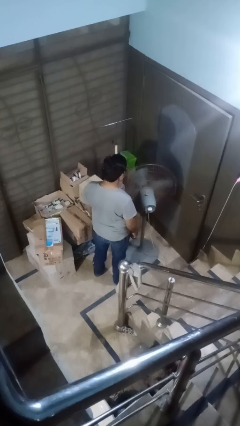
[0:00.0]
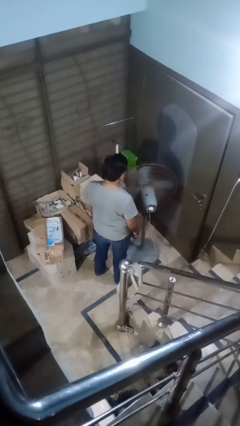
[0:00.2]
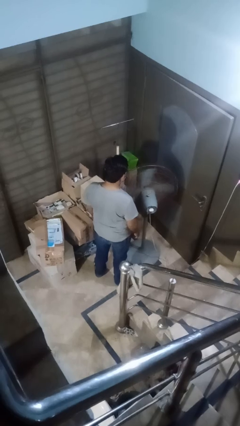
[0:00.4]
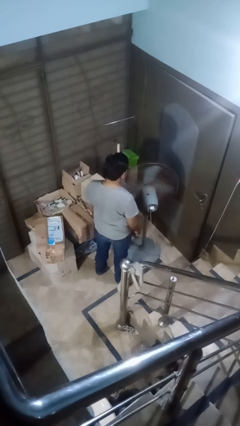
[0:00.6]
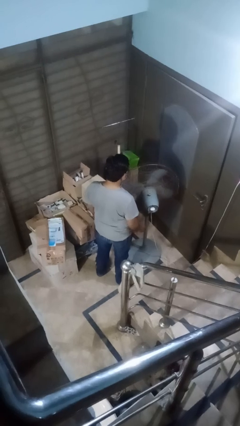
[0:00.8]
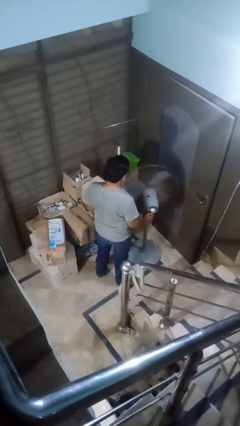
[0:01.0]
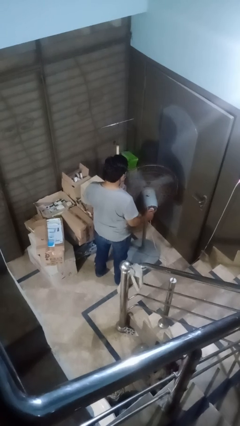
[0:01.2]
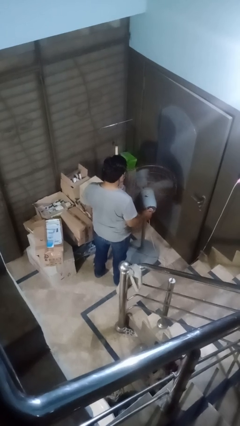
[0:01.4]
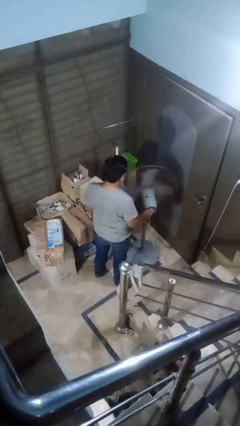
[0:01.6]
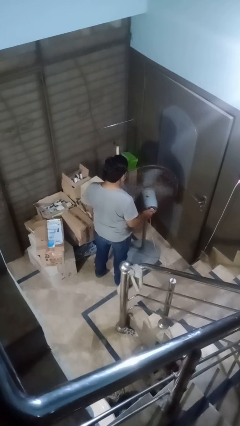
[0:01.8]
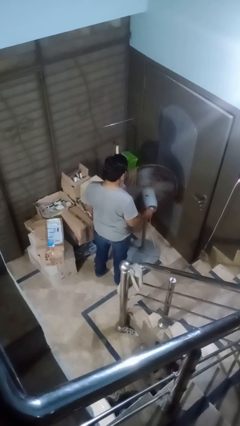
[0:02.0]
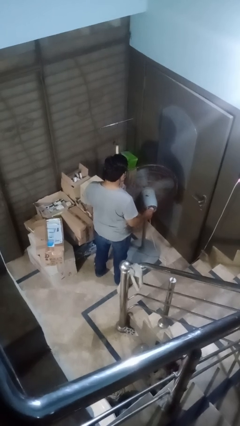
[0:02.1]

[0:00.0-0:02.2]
person turns on fan

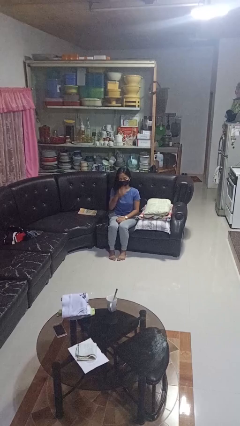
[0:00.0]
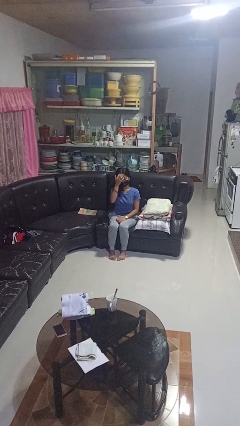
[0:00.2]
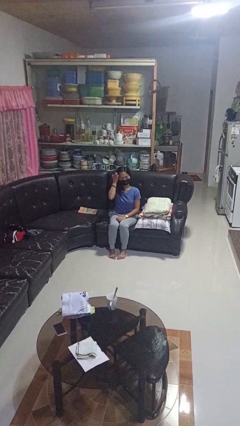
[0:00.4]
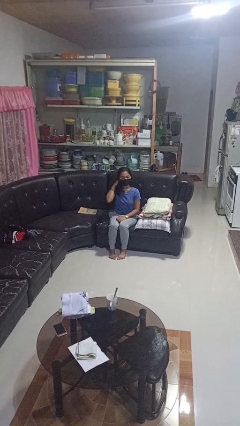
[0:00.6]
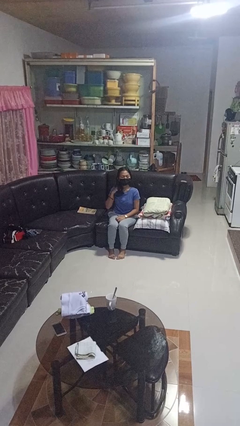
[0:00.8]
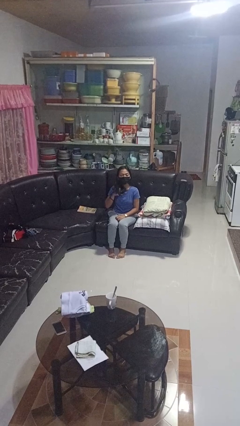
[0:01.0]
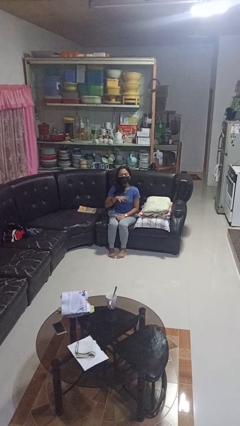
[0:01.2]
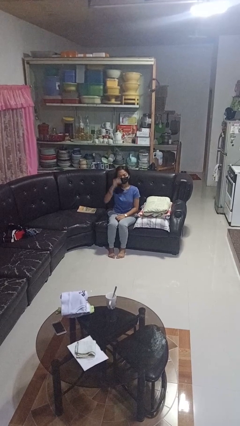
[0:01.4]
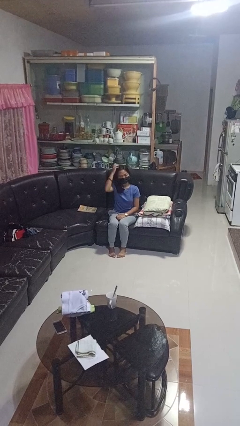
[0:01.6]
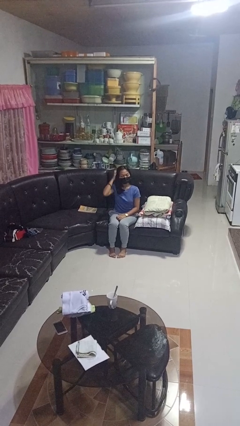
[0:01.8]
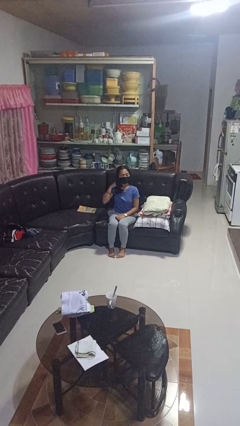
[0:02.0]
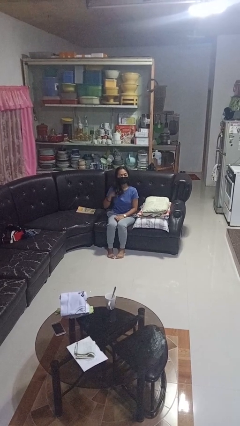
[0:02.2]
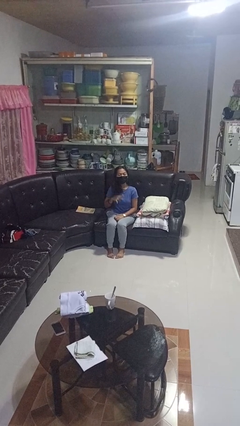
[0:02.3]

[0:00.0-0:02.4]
person strokes hair

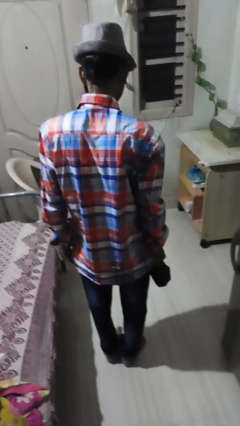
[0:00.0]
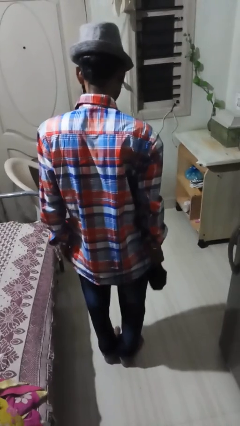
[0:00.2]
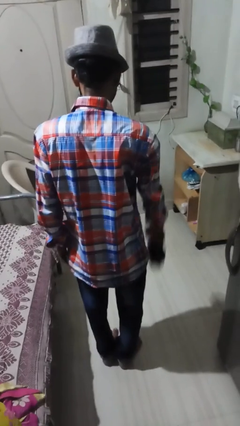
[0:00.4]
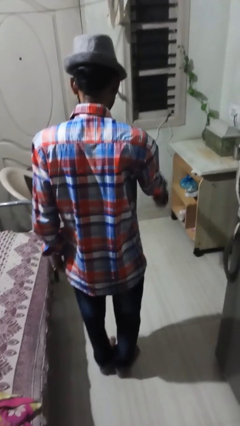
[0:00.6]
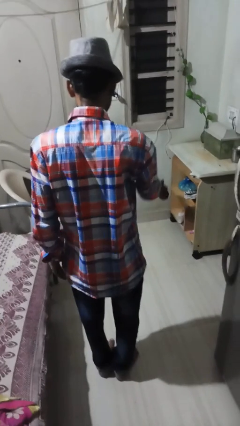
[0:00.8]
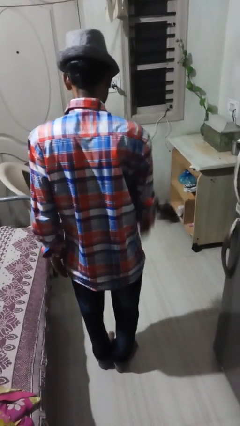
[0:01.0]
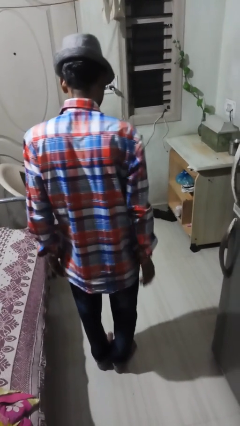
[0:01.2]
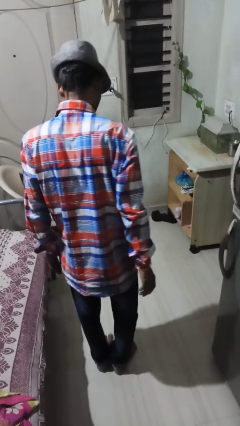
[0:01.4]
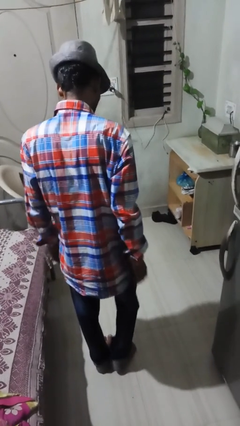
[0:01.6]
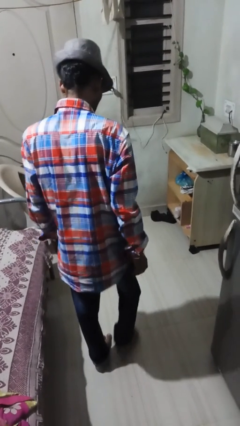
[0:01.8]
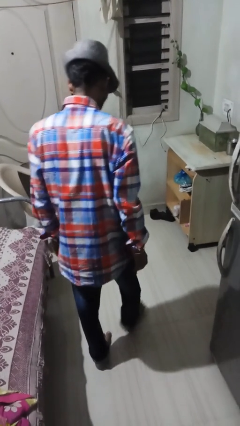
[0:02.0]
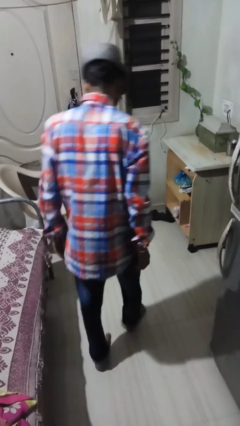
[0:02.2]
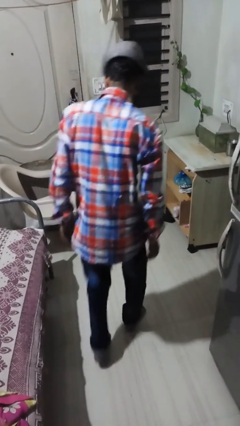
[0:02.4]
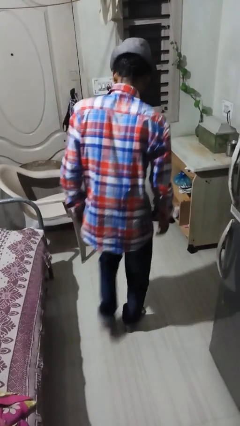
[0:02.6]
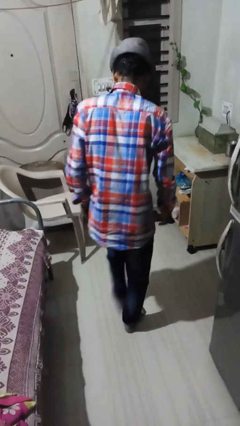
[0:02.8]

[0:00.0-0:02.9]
person throws object to ground

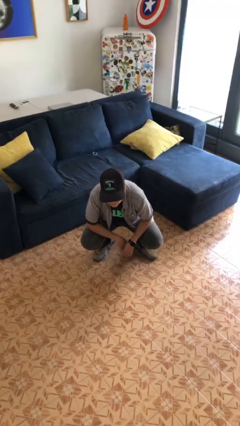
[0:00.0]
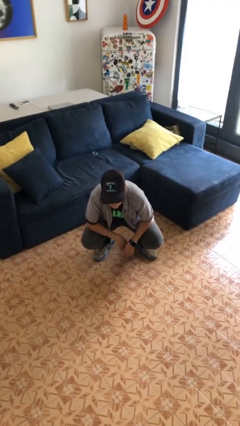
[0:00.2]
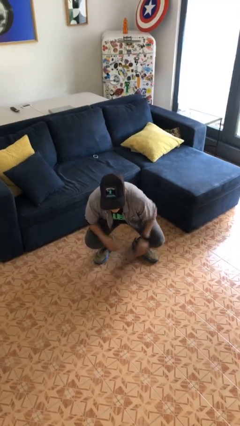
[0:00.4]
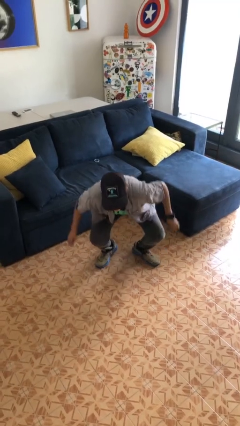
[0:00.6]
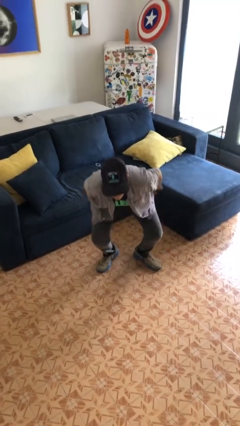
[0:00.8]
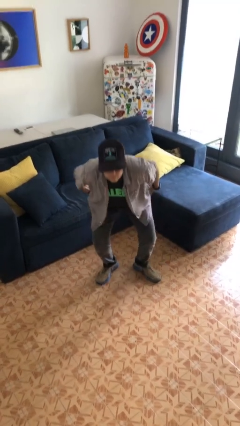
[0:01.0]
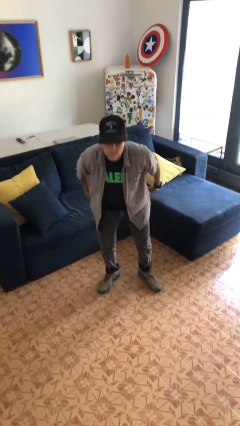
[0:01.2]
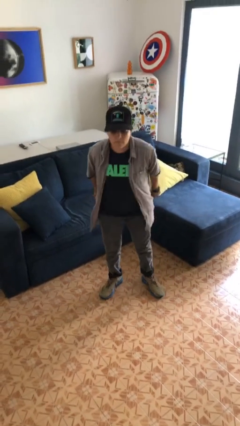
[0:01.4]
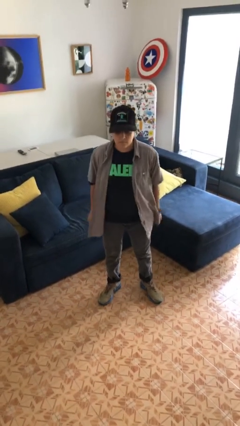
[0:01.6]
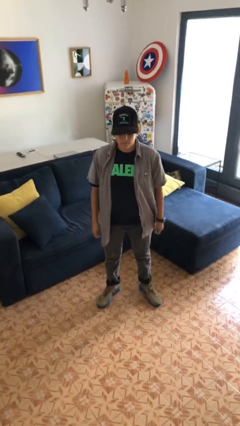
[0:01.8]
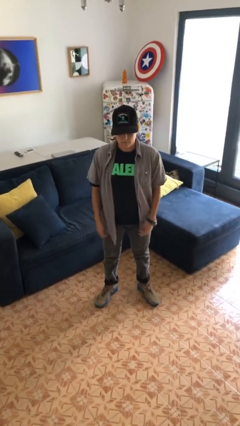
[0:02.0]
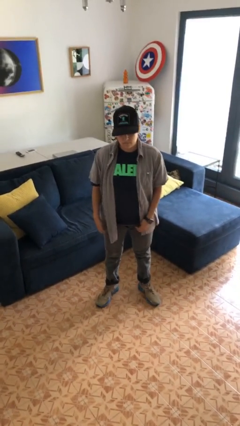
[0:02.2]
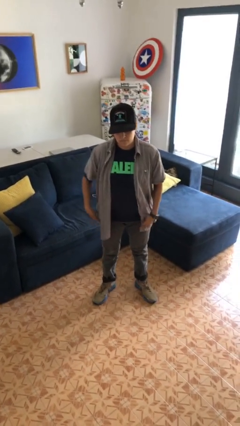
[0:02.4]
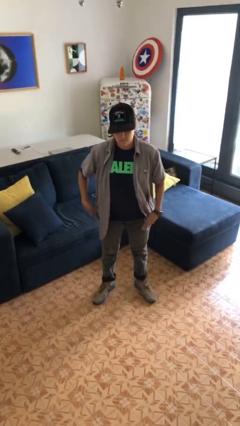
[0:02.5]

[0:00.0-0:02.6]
person stands up

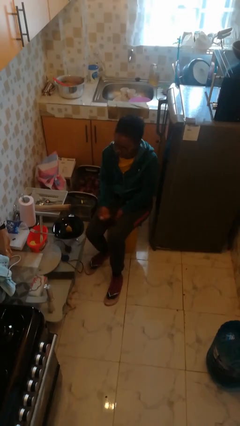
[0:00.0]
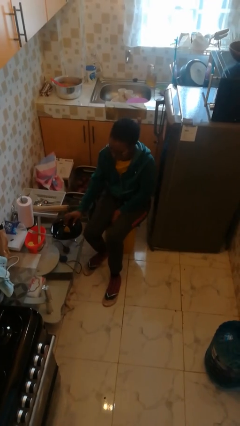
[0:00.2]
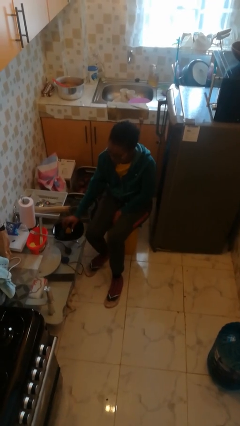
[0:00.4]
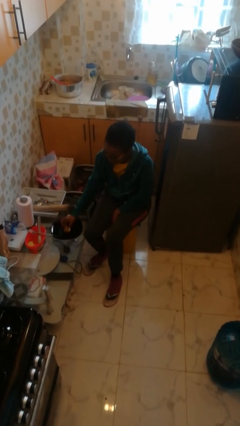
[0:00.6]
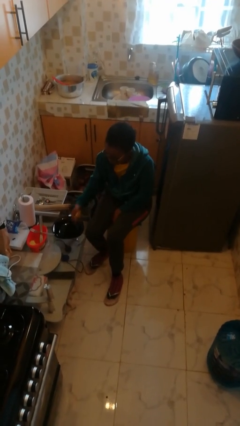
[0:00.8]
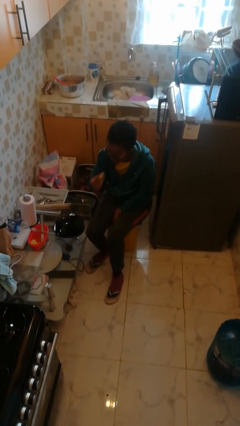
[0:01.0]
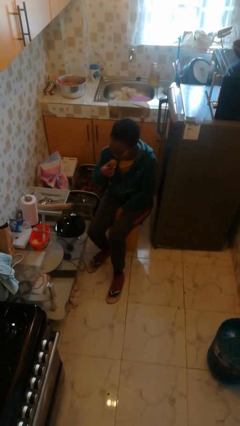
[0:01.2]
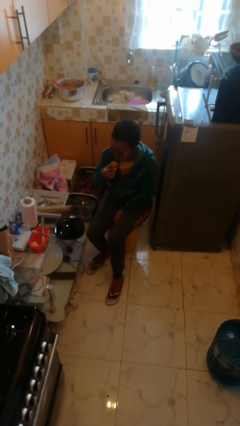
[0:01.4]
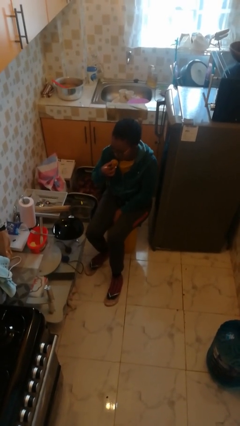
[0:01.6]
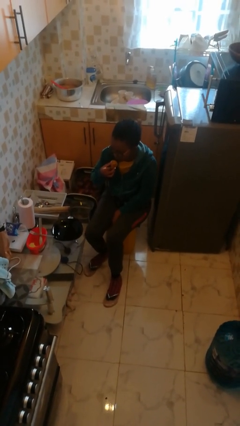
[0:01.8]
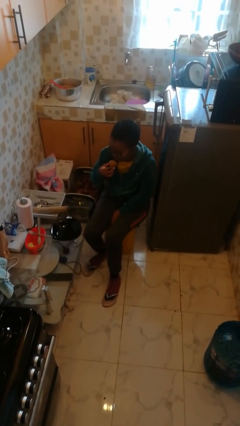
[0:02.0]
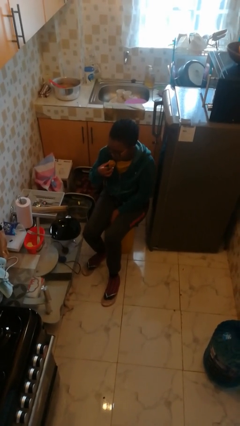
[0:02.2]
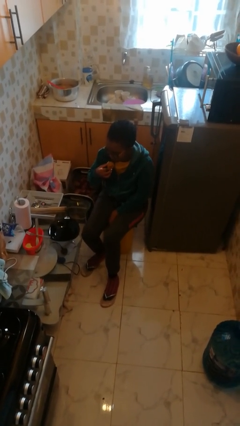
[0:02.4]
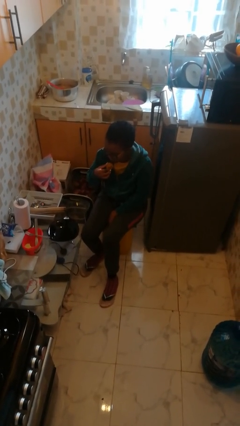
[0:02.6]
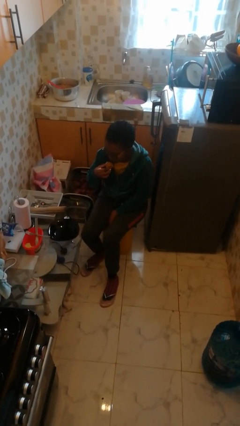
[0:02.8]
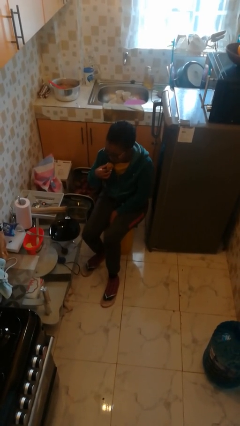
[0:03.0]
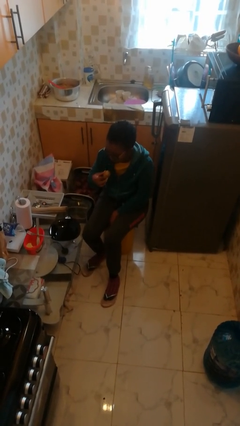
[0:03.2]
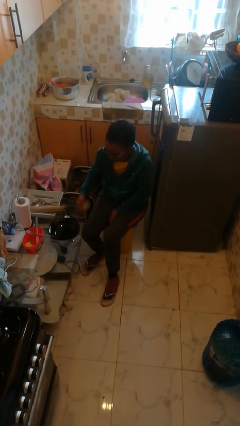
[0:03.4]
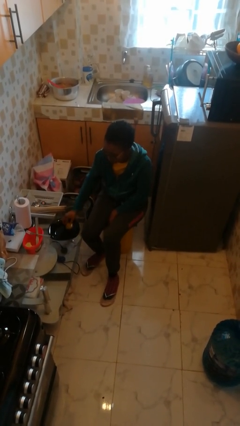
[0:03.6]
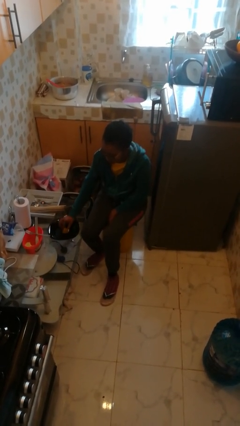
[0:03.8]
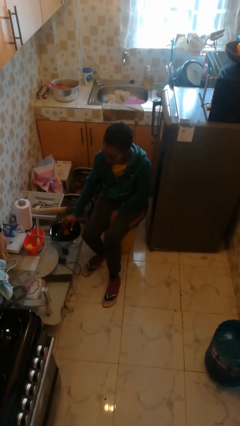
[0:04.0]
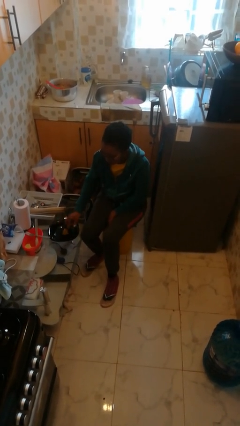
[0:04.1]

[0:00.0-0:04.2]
person eats with hands

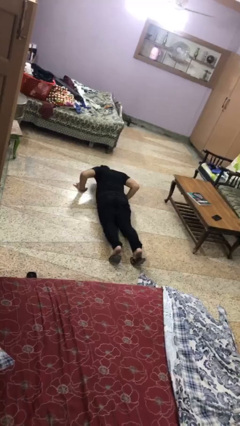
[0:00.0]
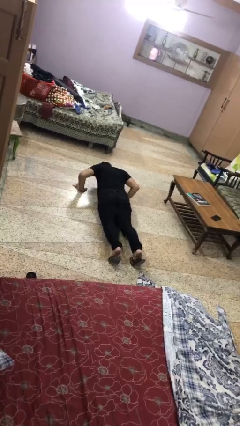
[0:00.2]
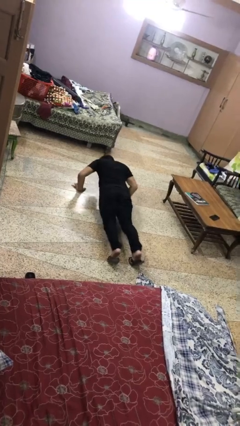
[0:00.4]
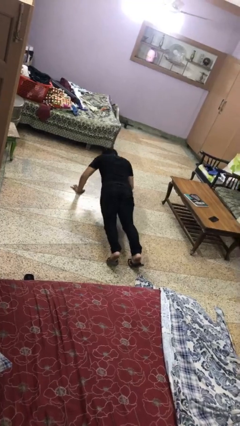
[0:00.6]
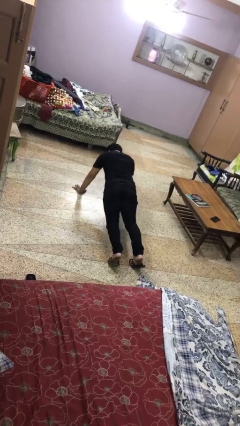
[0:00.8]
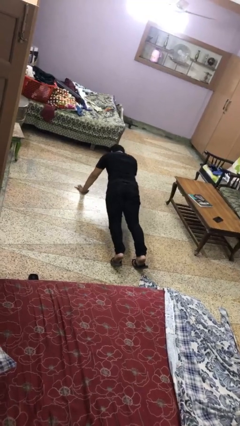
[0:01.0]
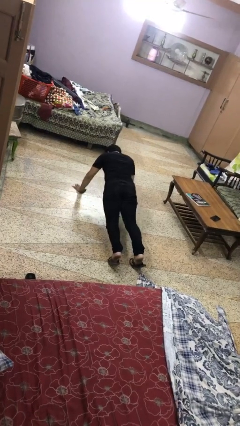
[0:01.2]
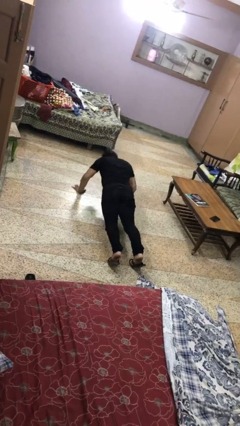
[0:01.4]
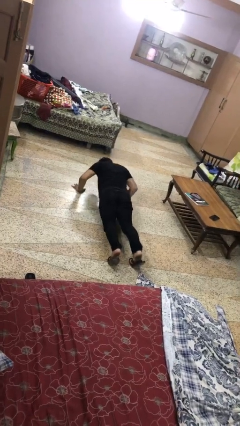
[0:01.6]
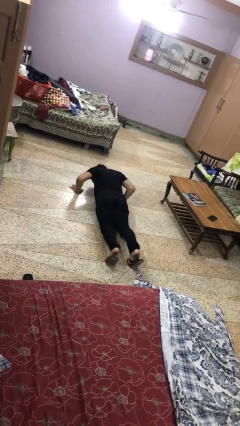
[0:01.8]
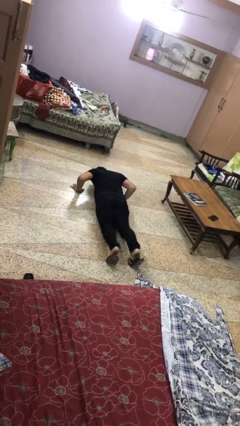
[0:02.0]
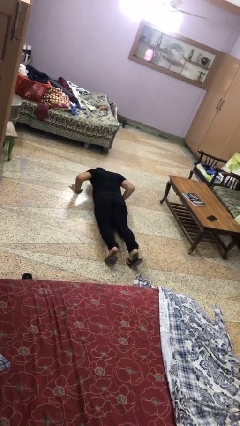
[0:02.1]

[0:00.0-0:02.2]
person exercises with pushup

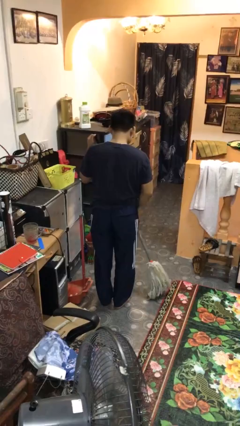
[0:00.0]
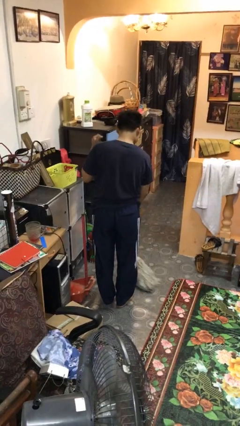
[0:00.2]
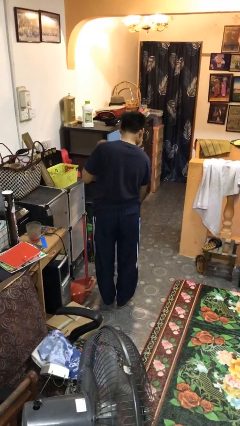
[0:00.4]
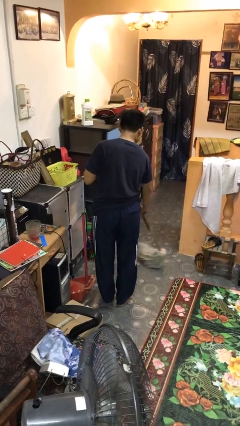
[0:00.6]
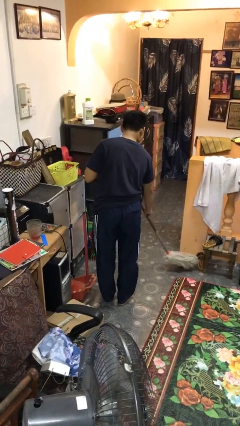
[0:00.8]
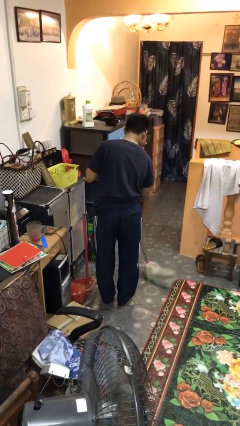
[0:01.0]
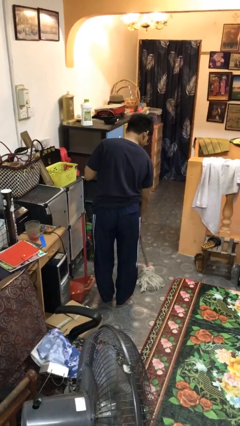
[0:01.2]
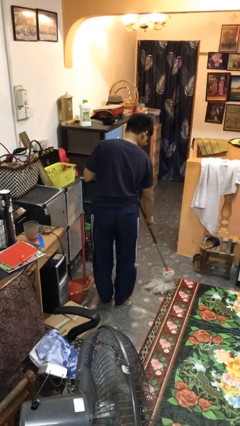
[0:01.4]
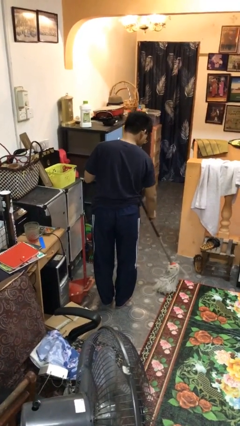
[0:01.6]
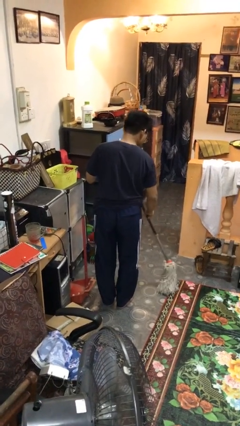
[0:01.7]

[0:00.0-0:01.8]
person mops
